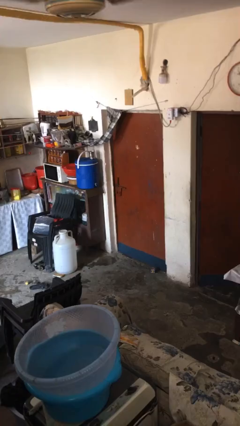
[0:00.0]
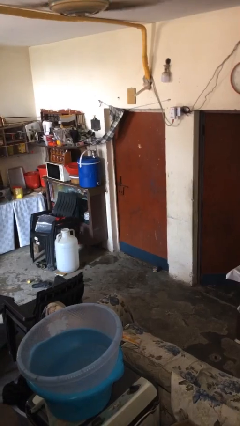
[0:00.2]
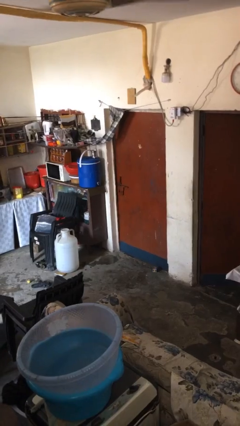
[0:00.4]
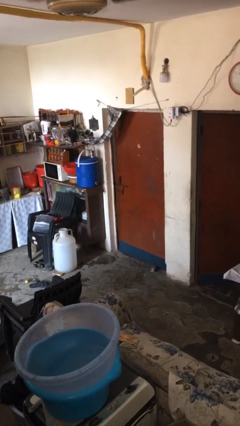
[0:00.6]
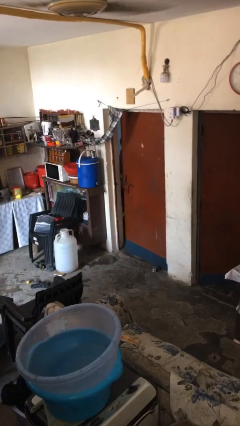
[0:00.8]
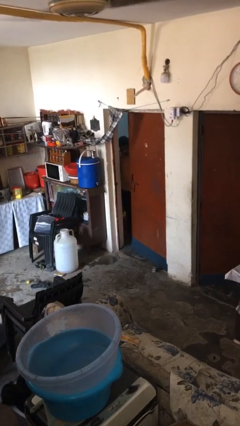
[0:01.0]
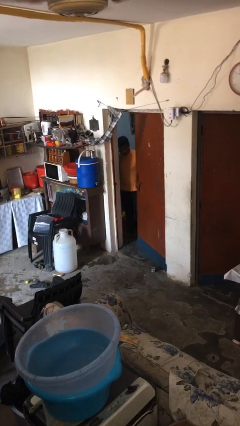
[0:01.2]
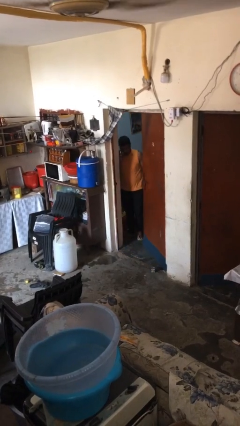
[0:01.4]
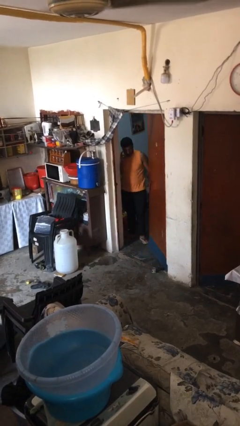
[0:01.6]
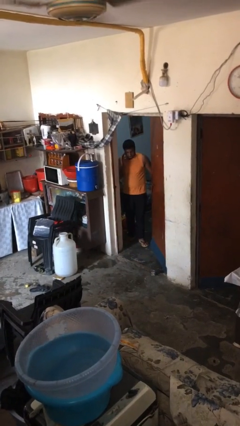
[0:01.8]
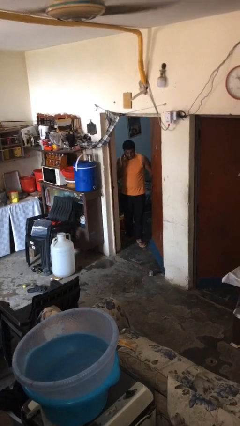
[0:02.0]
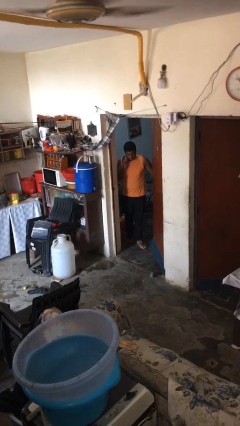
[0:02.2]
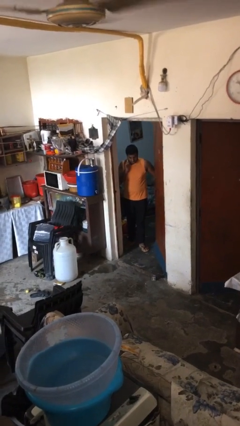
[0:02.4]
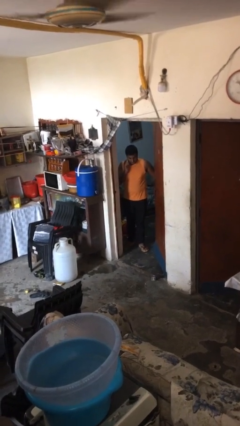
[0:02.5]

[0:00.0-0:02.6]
person opens facility door

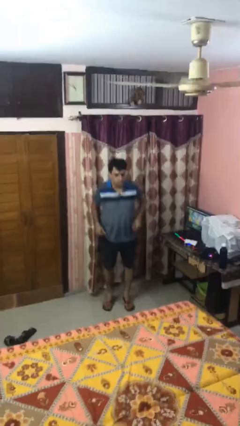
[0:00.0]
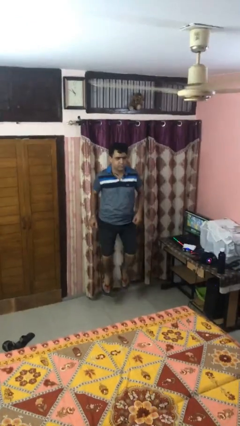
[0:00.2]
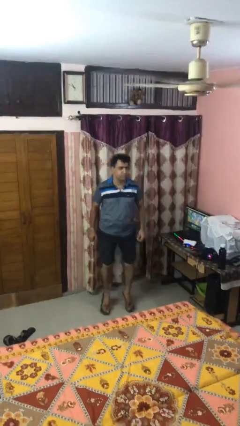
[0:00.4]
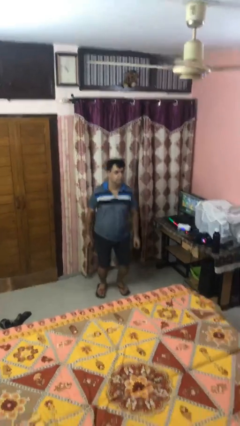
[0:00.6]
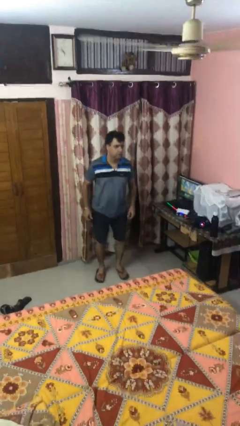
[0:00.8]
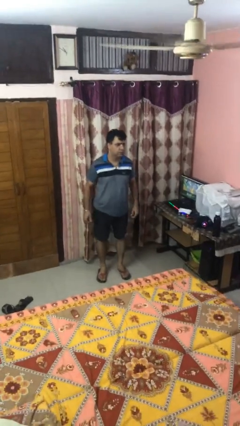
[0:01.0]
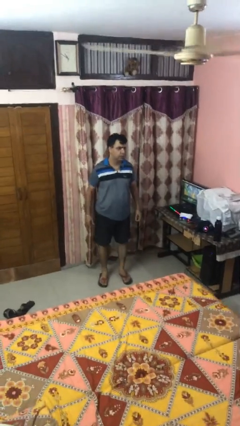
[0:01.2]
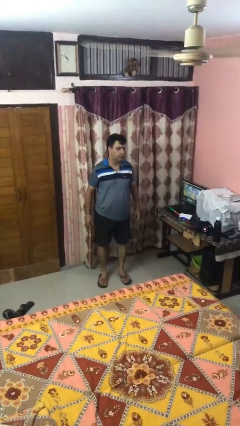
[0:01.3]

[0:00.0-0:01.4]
person jumps

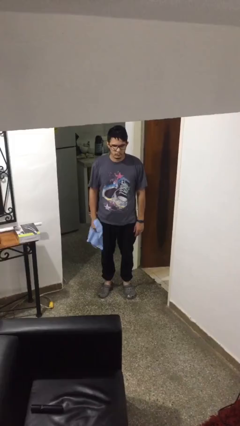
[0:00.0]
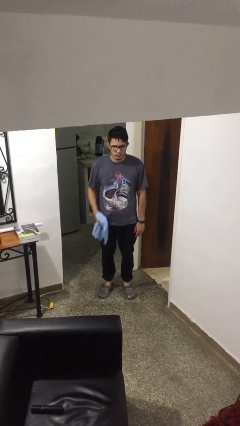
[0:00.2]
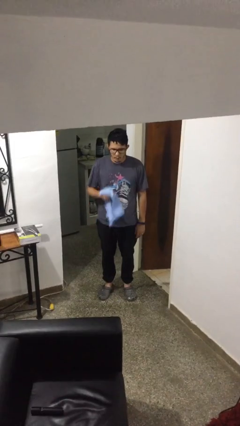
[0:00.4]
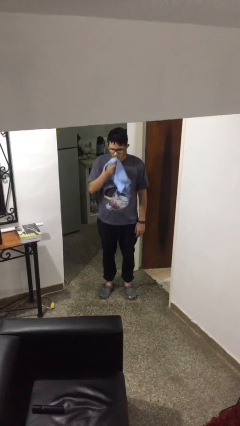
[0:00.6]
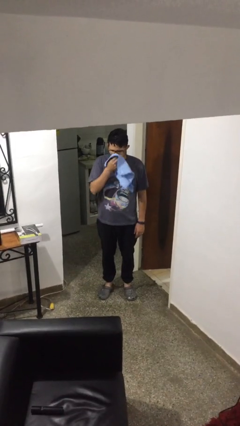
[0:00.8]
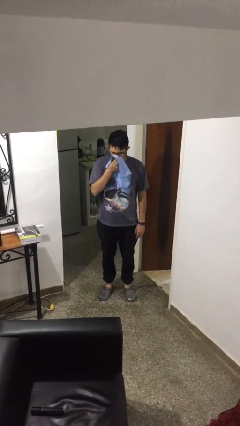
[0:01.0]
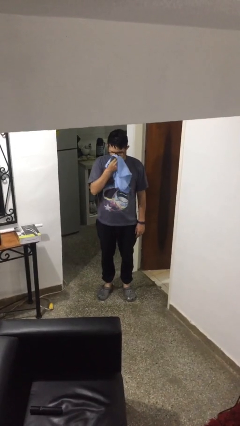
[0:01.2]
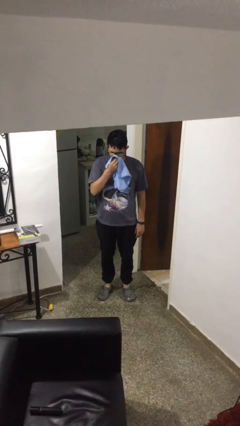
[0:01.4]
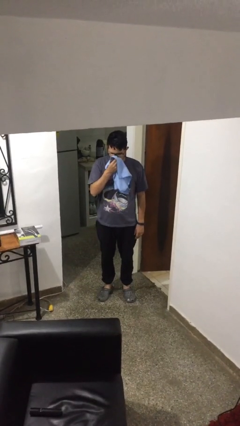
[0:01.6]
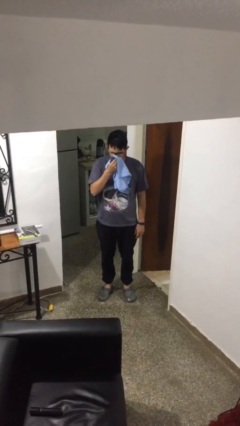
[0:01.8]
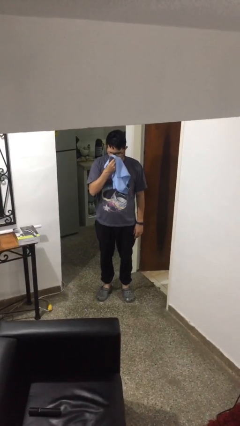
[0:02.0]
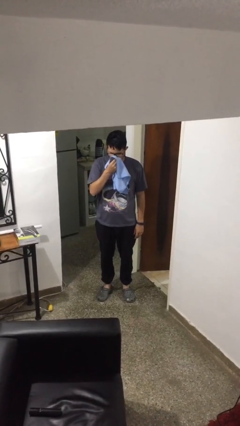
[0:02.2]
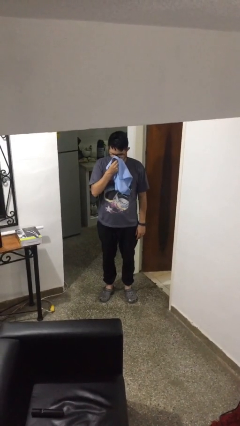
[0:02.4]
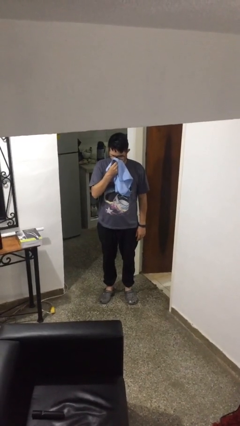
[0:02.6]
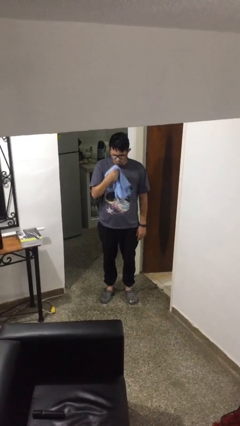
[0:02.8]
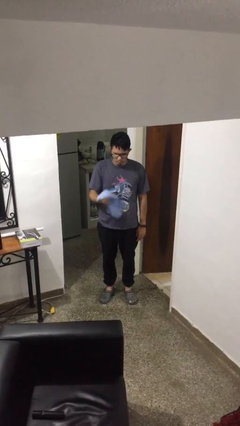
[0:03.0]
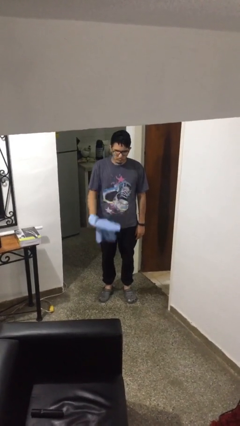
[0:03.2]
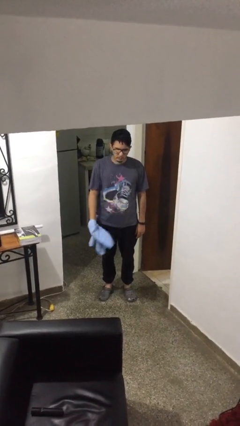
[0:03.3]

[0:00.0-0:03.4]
person blows nose

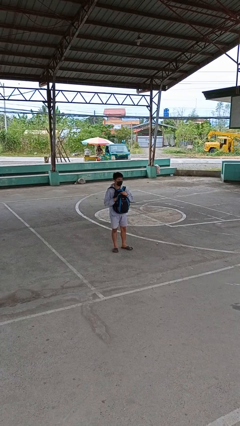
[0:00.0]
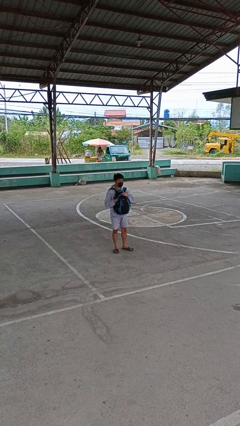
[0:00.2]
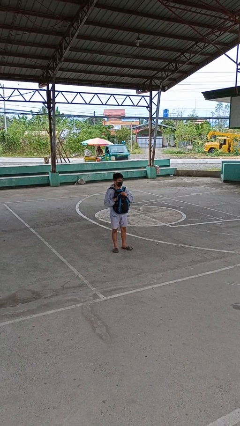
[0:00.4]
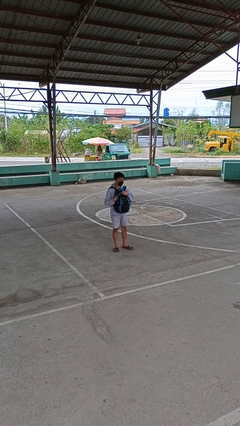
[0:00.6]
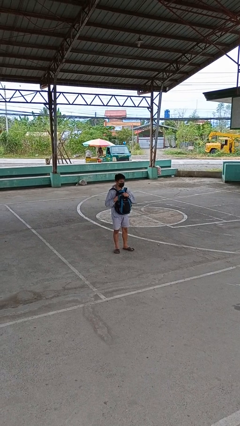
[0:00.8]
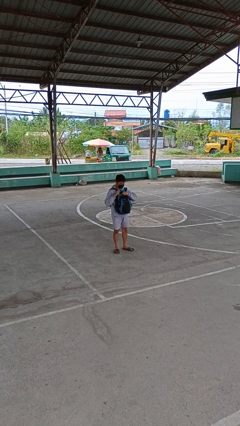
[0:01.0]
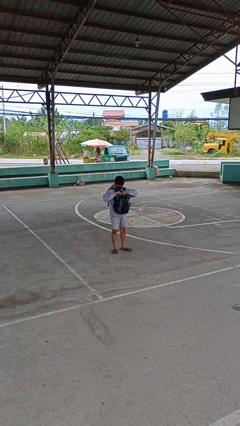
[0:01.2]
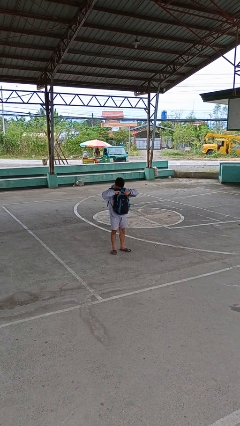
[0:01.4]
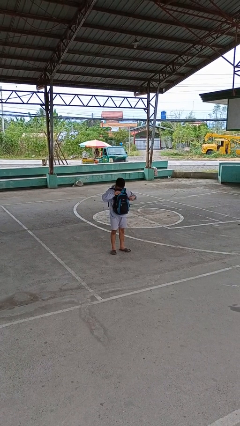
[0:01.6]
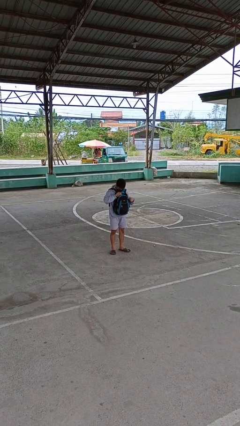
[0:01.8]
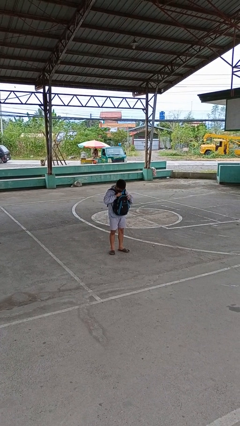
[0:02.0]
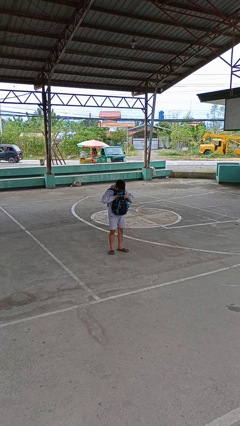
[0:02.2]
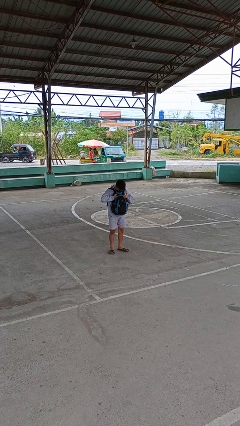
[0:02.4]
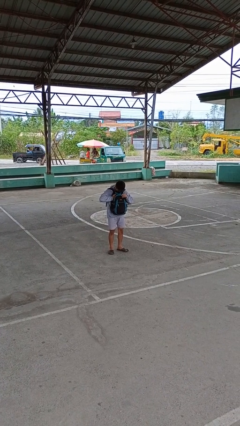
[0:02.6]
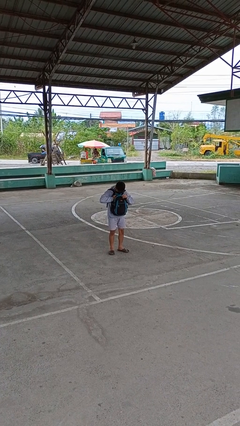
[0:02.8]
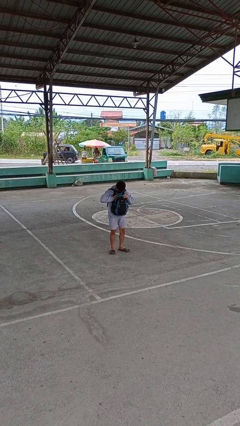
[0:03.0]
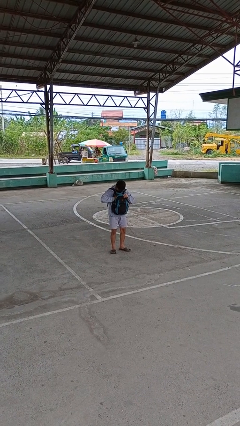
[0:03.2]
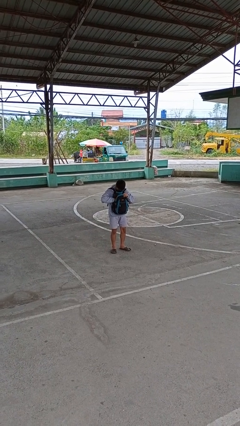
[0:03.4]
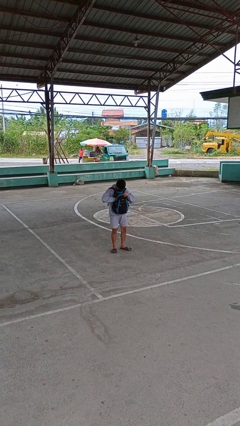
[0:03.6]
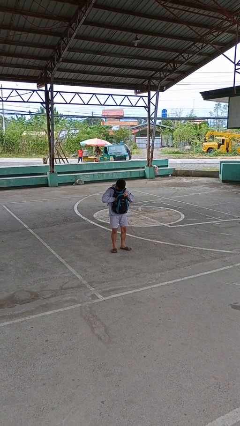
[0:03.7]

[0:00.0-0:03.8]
person searches in backpack

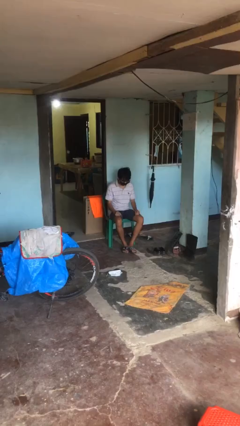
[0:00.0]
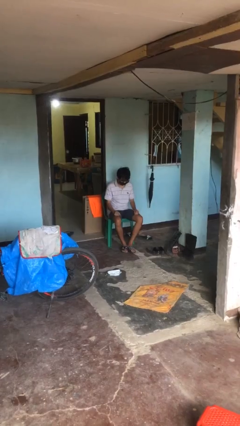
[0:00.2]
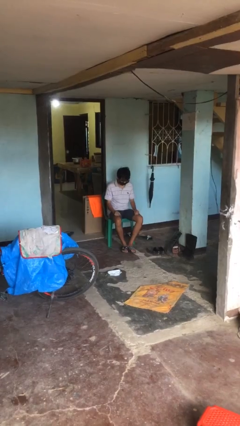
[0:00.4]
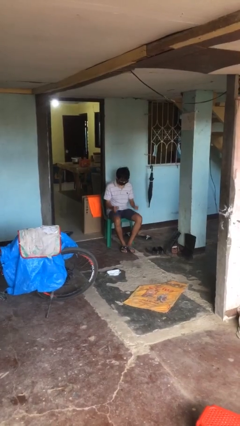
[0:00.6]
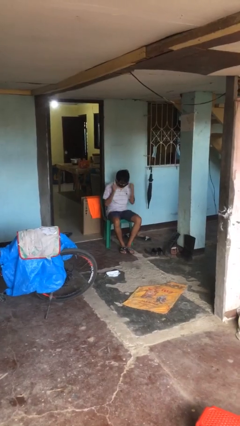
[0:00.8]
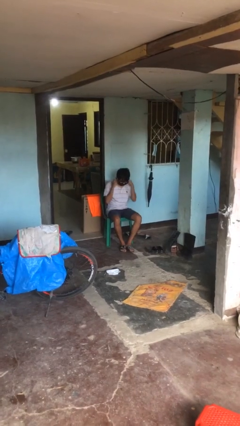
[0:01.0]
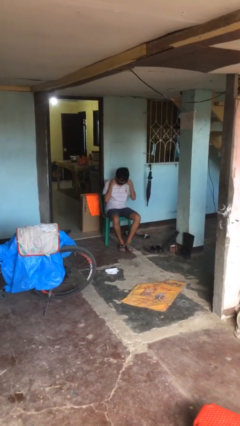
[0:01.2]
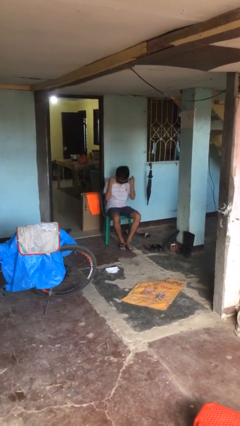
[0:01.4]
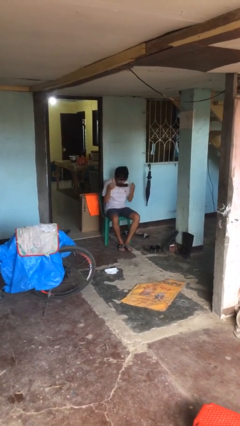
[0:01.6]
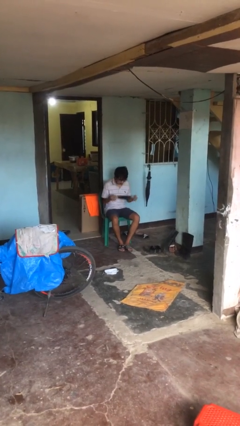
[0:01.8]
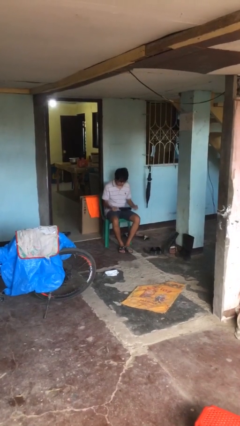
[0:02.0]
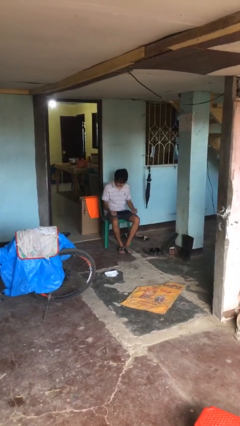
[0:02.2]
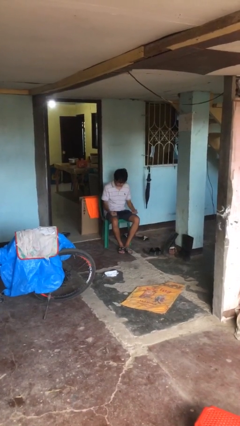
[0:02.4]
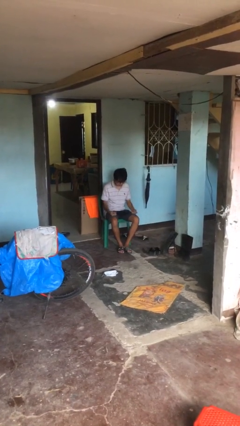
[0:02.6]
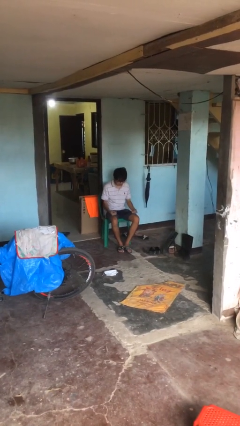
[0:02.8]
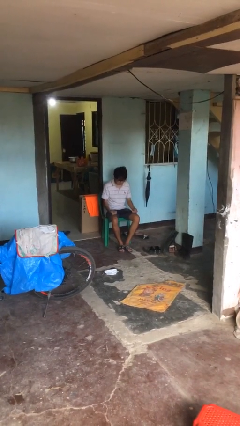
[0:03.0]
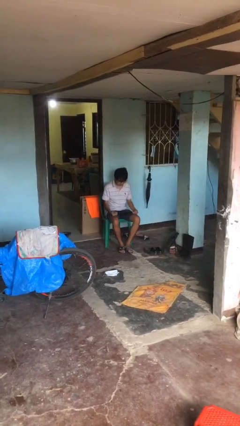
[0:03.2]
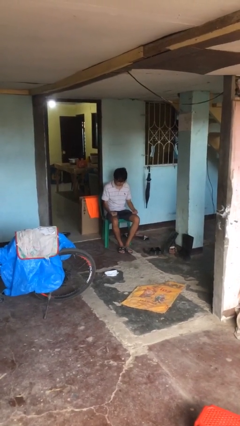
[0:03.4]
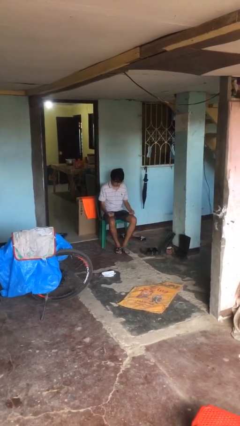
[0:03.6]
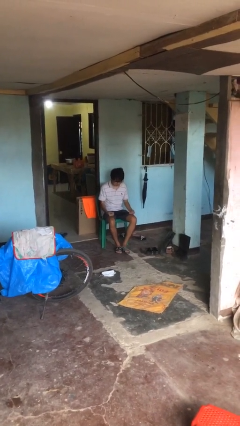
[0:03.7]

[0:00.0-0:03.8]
person takes off facemask

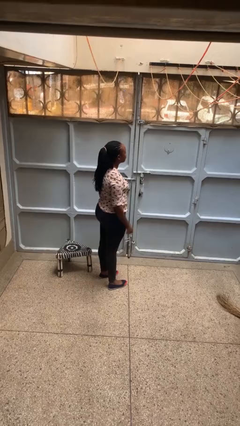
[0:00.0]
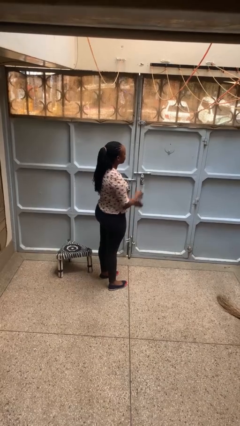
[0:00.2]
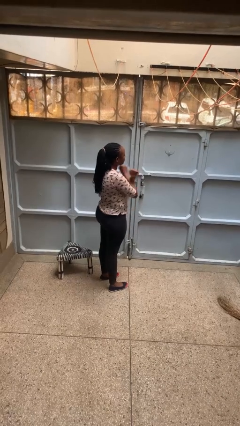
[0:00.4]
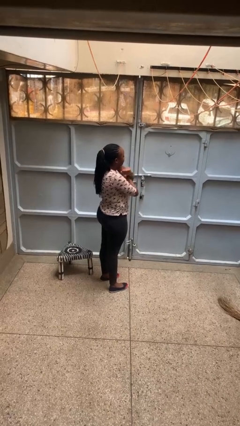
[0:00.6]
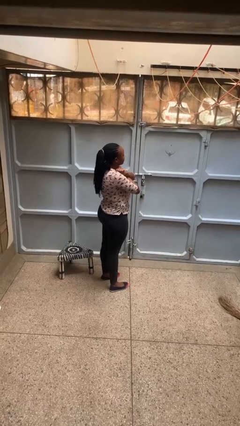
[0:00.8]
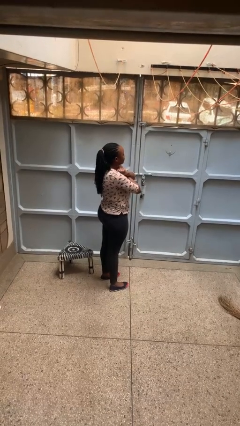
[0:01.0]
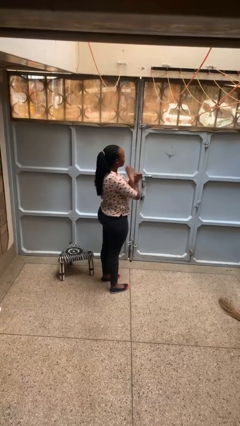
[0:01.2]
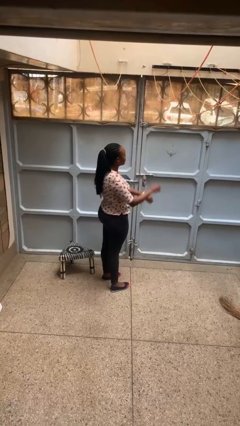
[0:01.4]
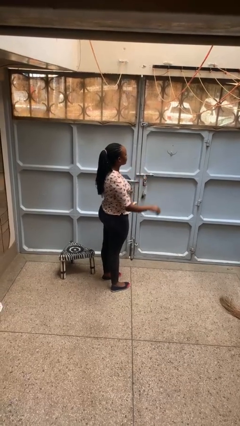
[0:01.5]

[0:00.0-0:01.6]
person gestures arms x

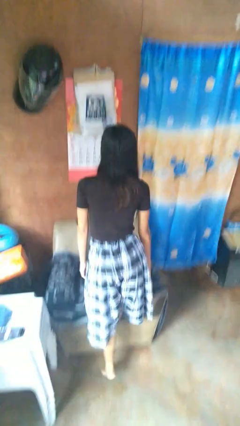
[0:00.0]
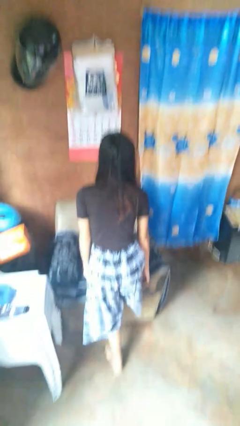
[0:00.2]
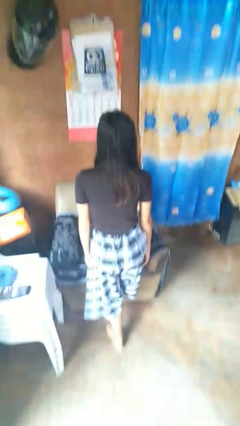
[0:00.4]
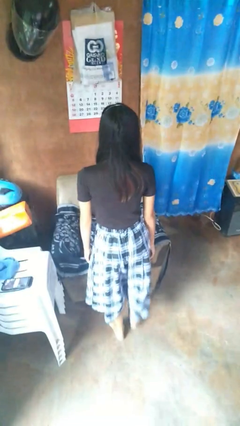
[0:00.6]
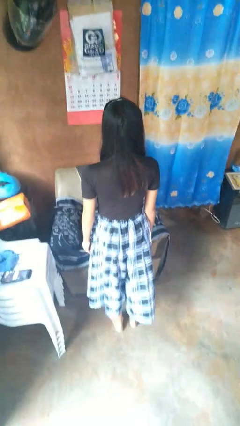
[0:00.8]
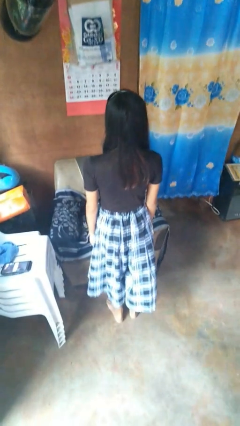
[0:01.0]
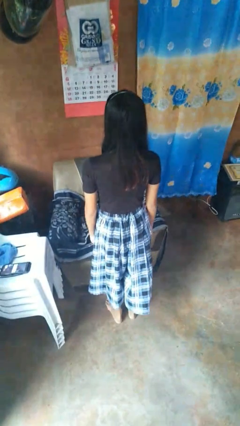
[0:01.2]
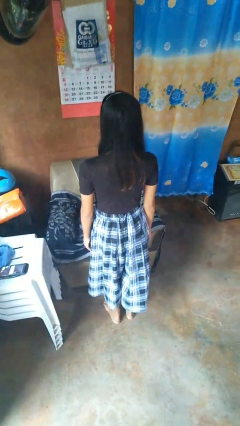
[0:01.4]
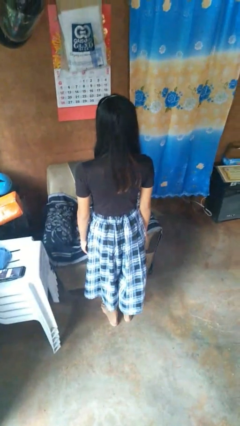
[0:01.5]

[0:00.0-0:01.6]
person climbs off couch
